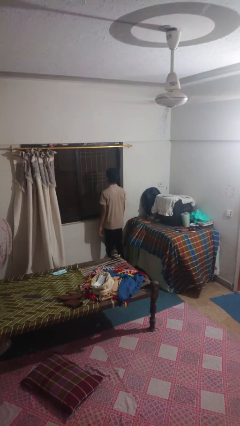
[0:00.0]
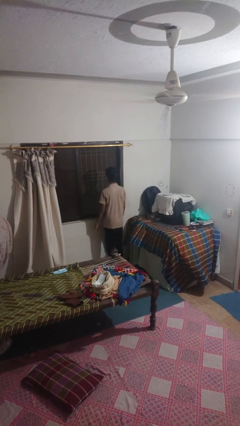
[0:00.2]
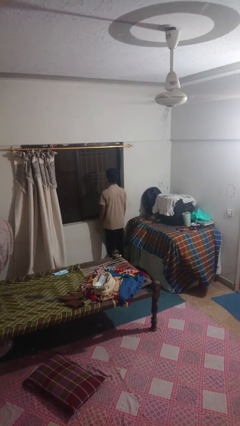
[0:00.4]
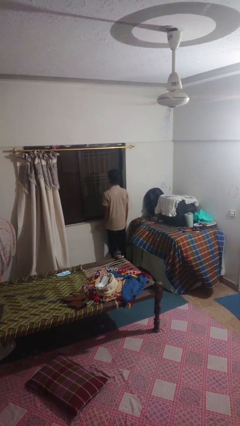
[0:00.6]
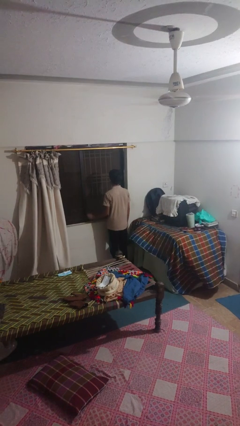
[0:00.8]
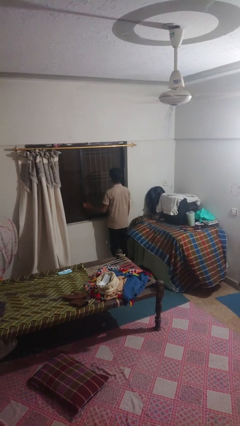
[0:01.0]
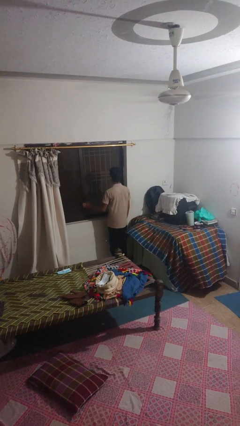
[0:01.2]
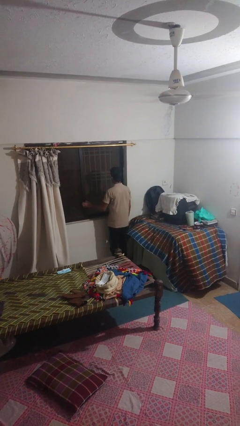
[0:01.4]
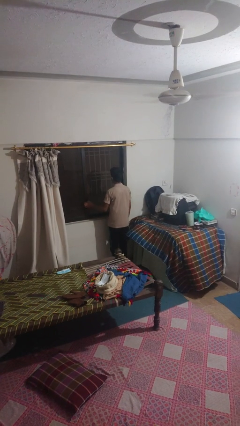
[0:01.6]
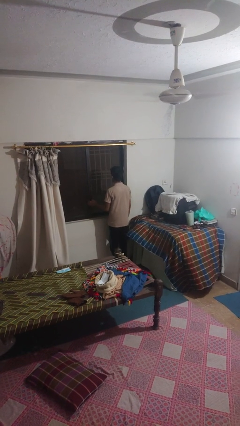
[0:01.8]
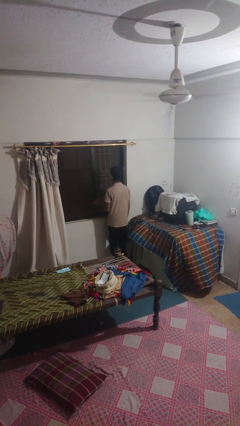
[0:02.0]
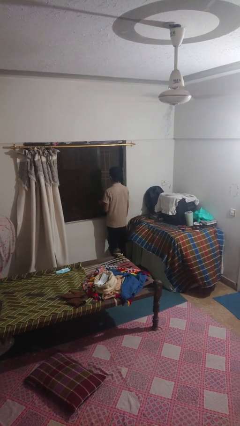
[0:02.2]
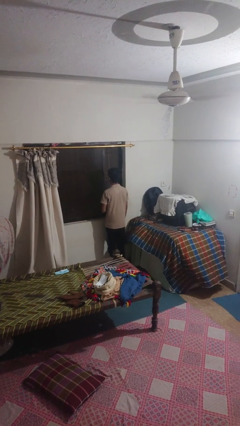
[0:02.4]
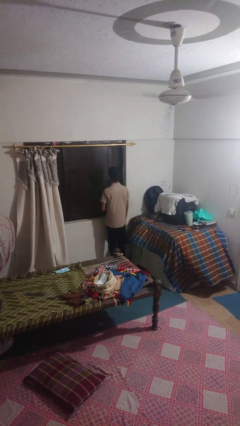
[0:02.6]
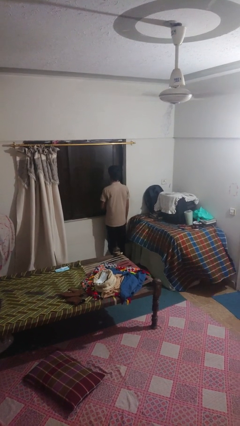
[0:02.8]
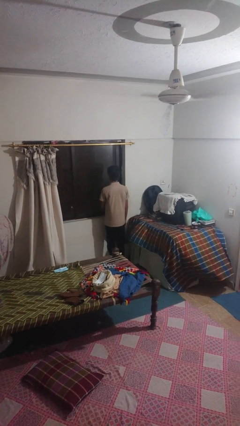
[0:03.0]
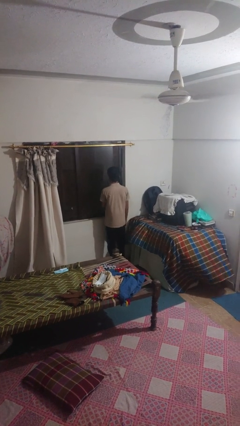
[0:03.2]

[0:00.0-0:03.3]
person closes sliding door

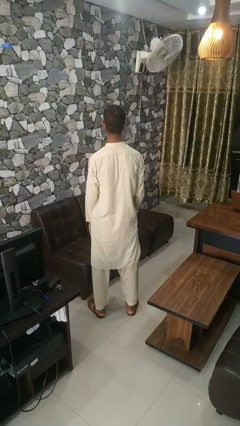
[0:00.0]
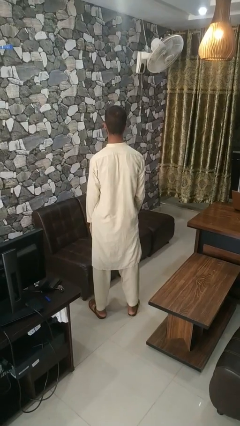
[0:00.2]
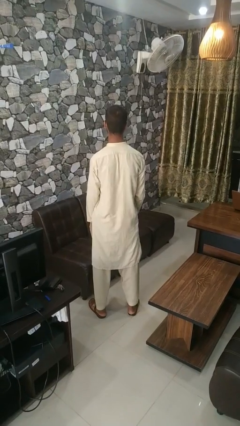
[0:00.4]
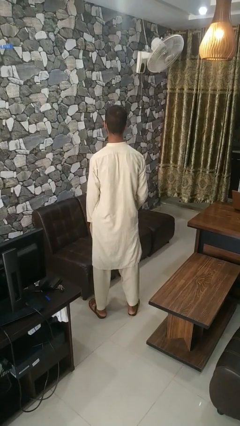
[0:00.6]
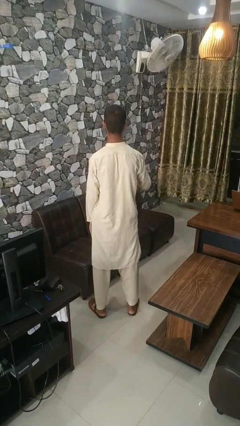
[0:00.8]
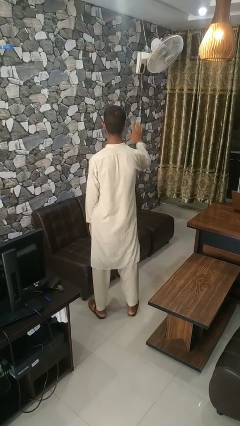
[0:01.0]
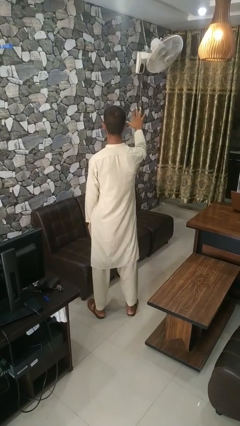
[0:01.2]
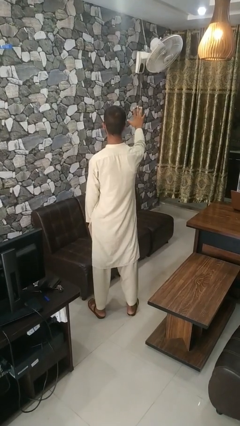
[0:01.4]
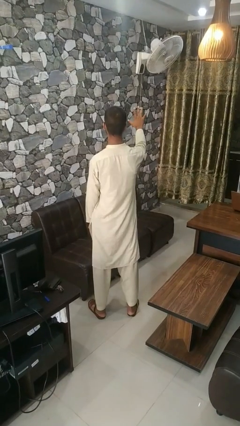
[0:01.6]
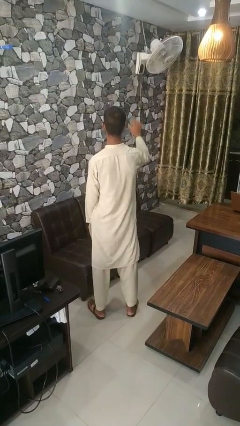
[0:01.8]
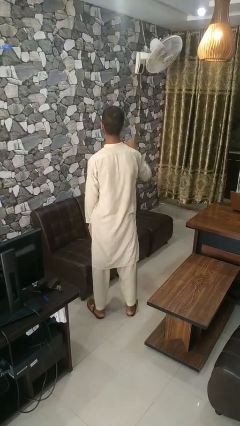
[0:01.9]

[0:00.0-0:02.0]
person gestures number five

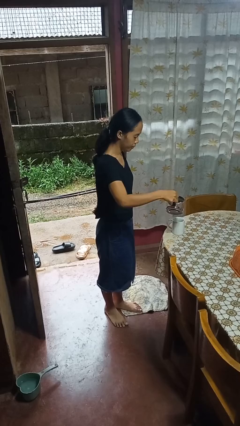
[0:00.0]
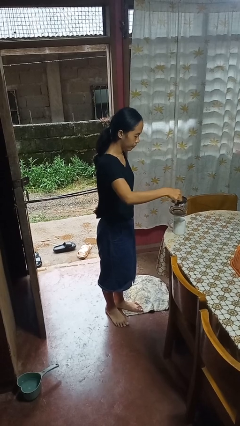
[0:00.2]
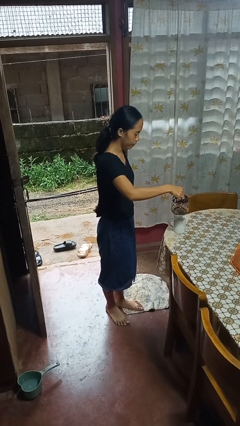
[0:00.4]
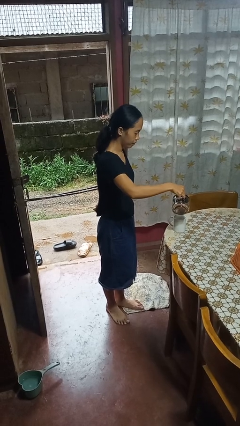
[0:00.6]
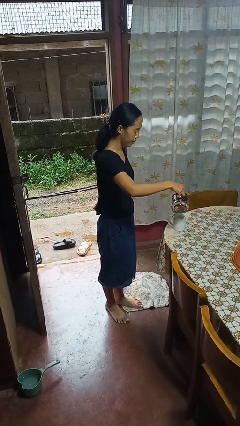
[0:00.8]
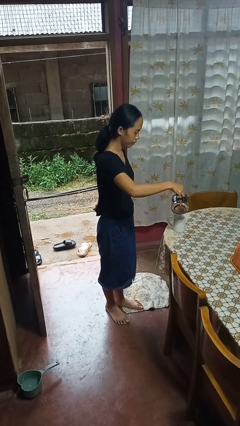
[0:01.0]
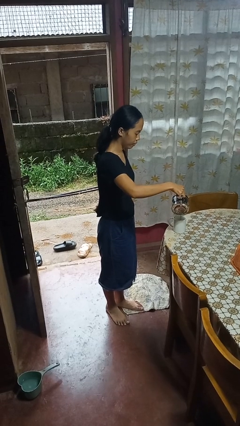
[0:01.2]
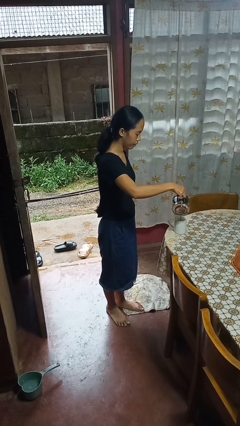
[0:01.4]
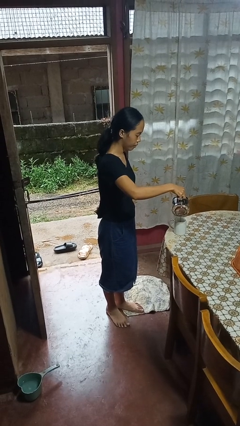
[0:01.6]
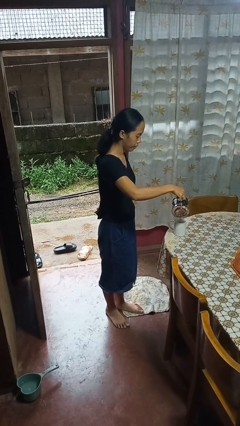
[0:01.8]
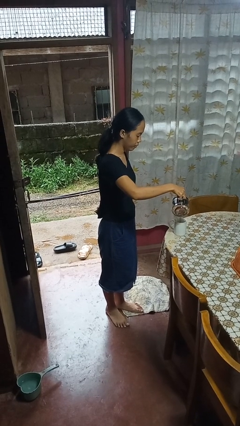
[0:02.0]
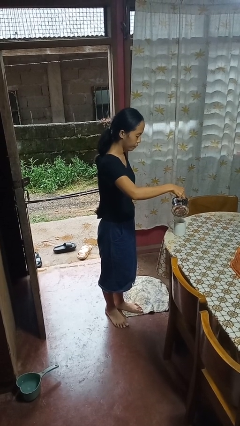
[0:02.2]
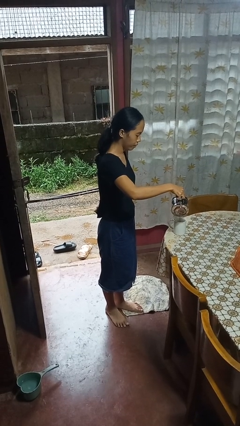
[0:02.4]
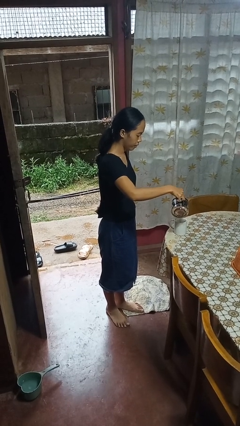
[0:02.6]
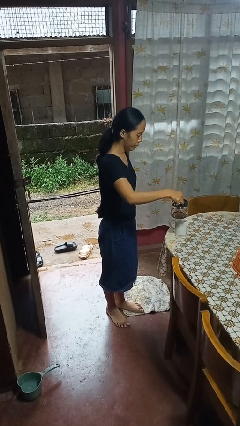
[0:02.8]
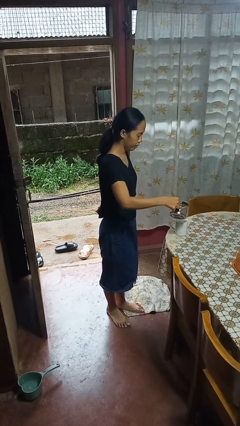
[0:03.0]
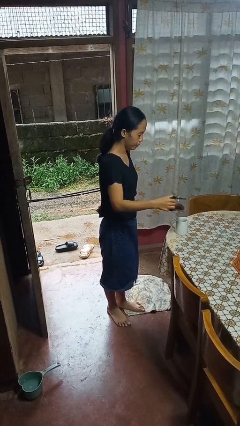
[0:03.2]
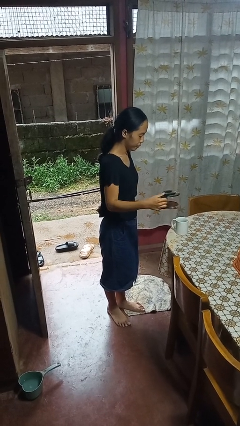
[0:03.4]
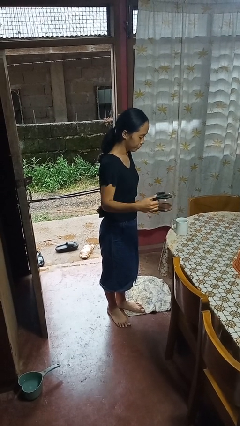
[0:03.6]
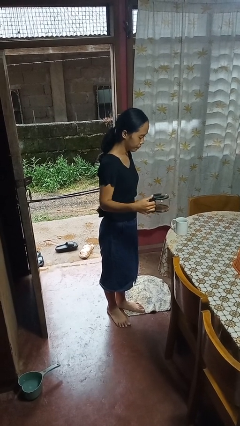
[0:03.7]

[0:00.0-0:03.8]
person pours coffee into mug

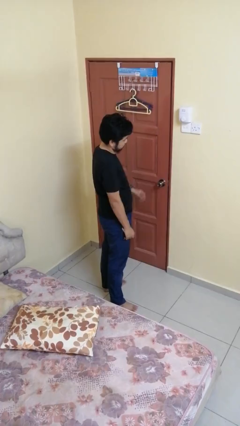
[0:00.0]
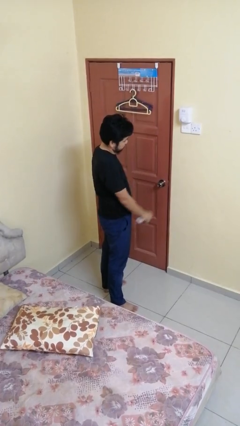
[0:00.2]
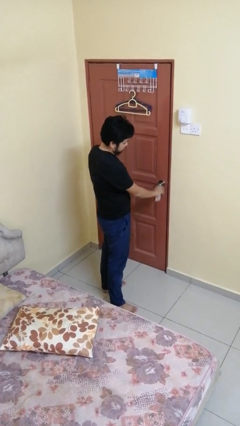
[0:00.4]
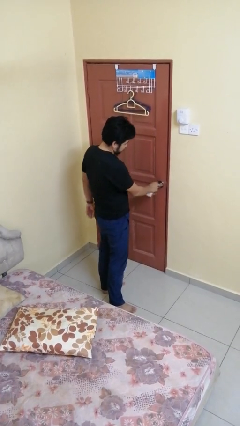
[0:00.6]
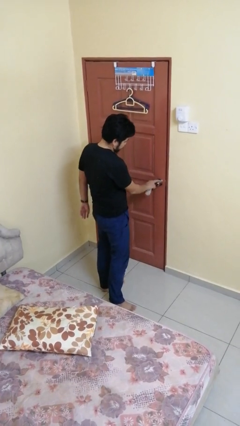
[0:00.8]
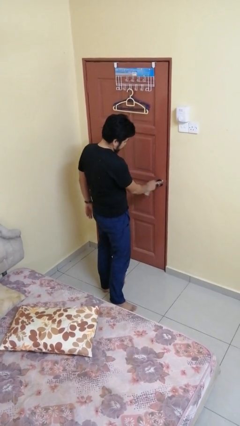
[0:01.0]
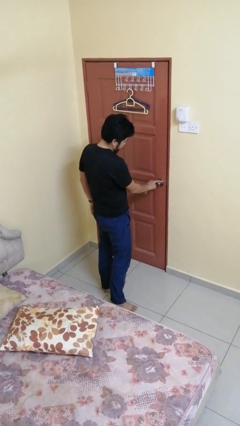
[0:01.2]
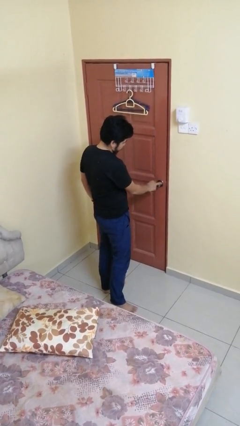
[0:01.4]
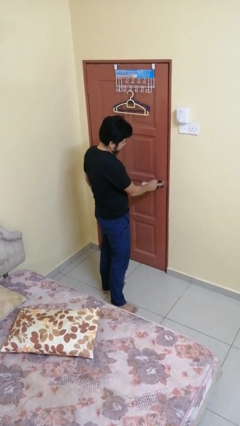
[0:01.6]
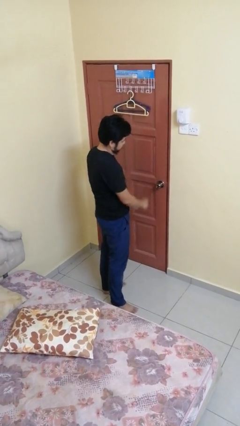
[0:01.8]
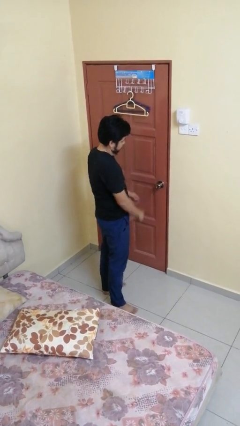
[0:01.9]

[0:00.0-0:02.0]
person unlocks door with keys

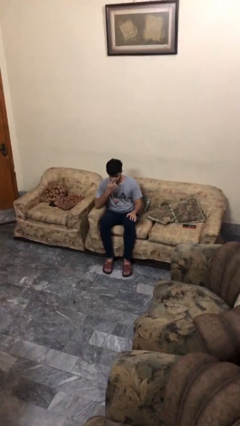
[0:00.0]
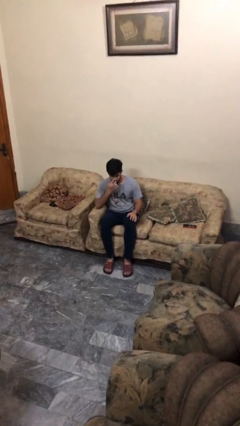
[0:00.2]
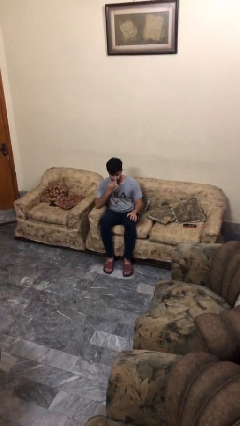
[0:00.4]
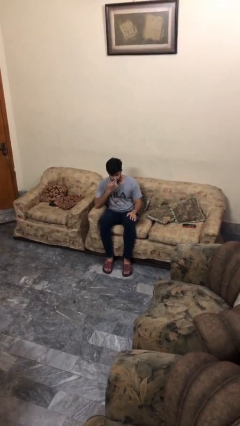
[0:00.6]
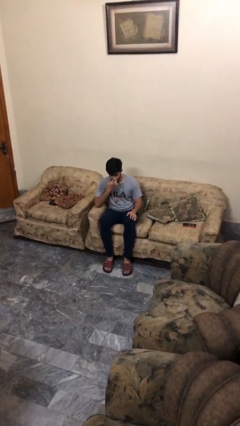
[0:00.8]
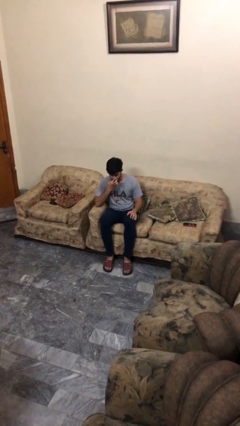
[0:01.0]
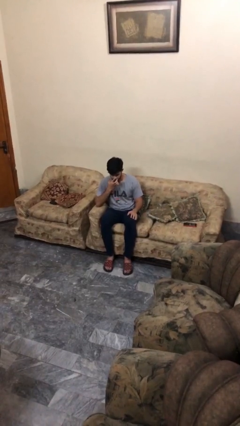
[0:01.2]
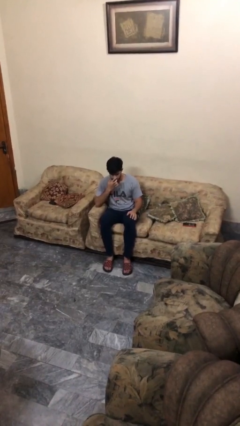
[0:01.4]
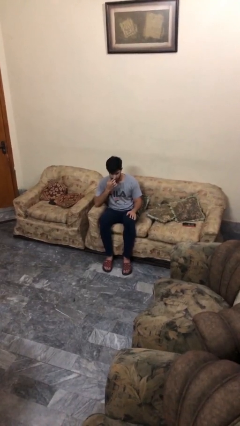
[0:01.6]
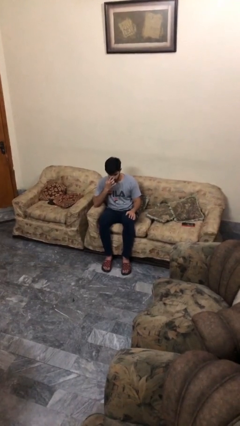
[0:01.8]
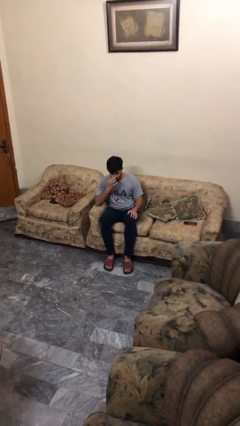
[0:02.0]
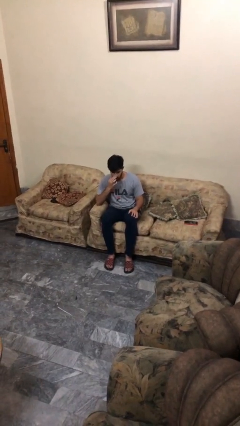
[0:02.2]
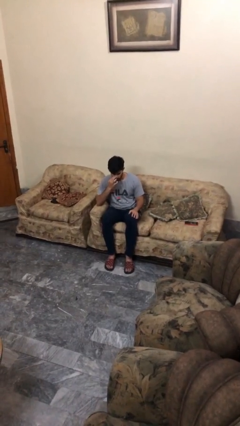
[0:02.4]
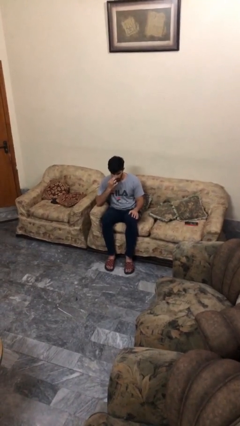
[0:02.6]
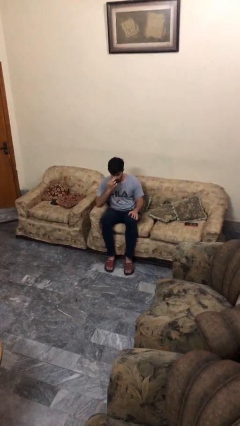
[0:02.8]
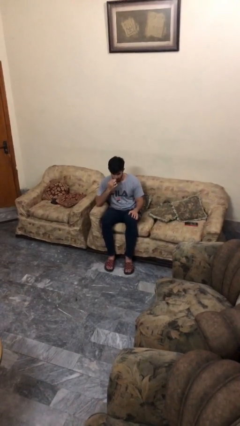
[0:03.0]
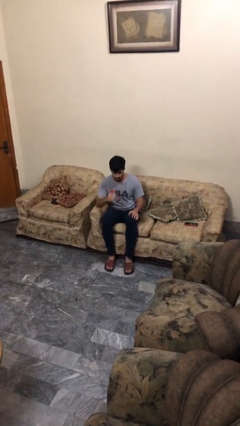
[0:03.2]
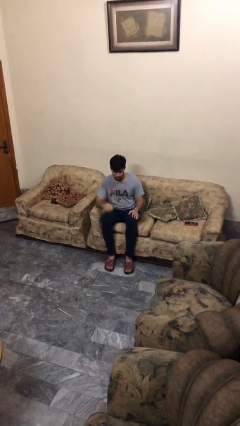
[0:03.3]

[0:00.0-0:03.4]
person scratches face

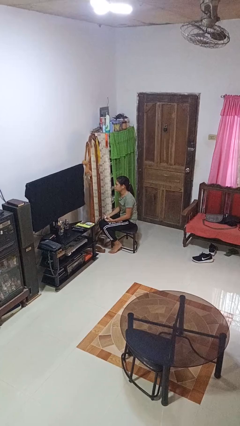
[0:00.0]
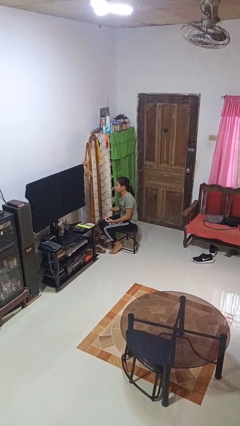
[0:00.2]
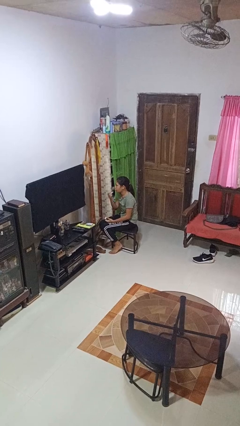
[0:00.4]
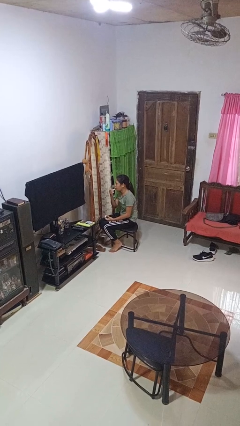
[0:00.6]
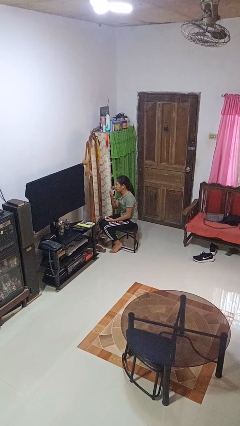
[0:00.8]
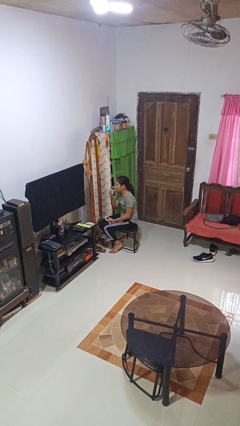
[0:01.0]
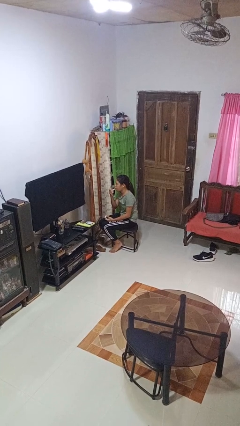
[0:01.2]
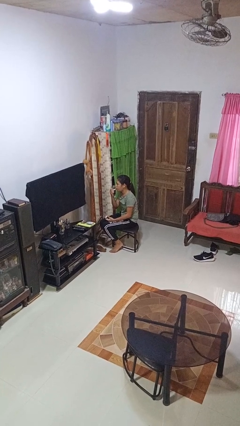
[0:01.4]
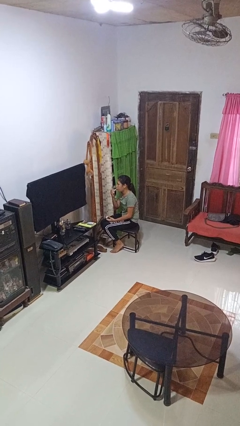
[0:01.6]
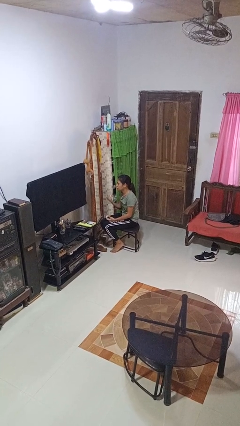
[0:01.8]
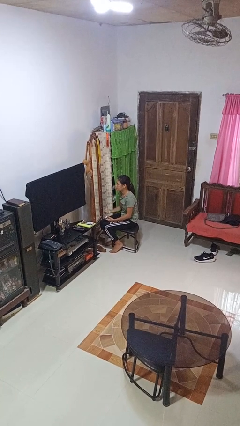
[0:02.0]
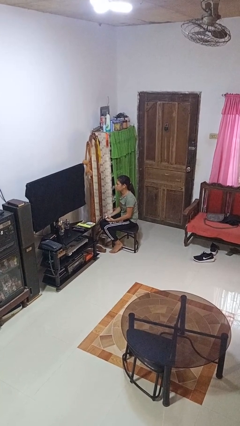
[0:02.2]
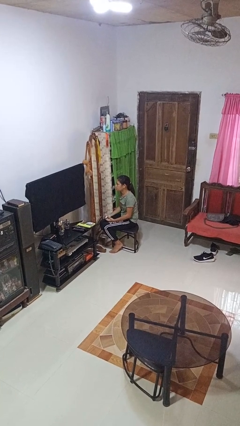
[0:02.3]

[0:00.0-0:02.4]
person applies lip makeup

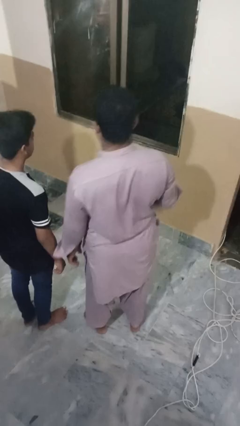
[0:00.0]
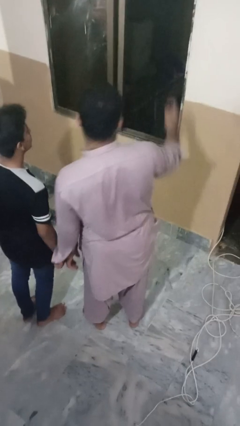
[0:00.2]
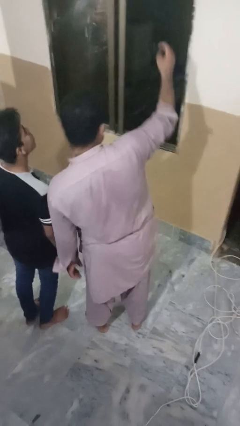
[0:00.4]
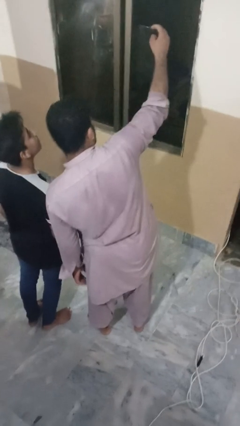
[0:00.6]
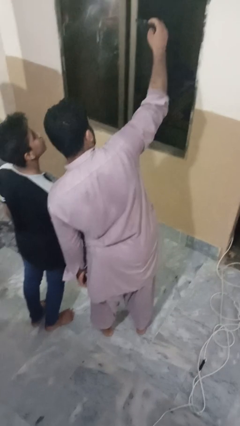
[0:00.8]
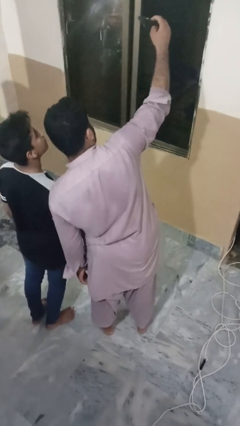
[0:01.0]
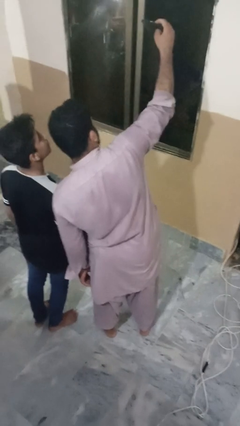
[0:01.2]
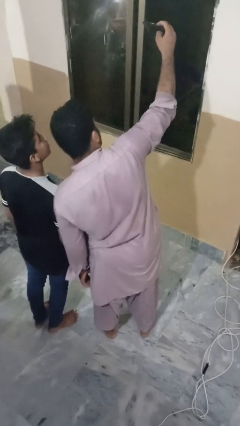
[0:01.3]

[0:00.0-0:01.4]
person takes selfie with person
